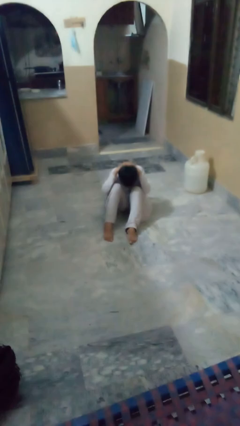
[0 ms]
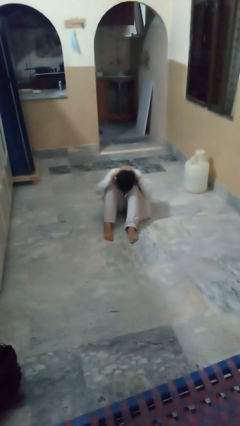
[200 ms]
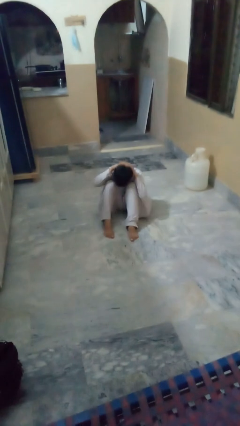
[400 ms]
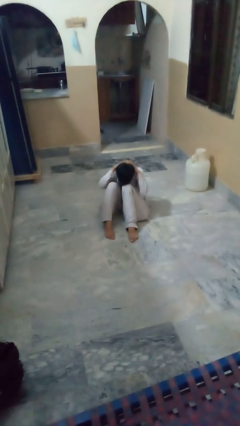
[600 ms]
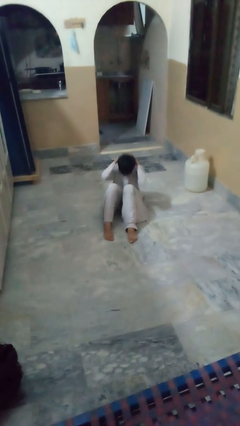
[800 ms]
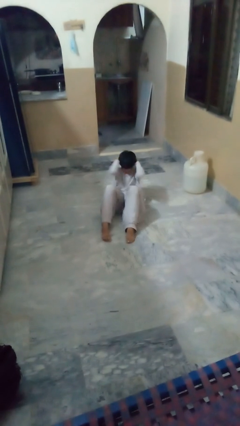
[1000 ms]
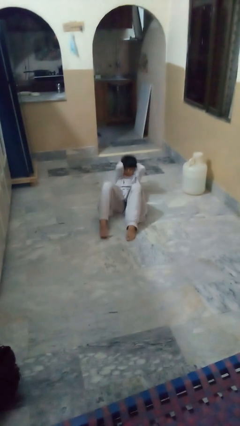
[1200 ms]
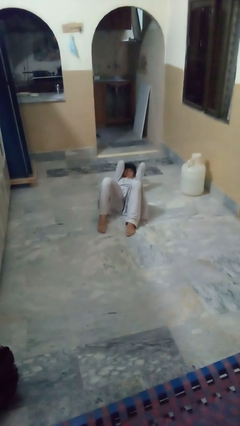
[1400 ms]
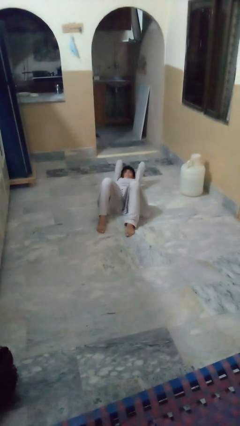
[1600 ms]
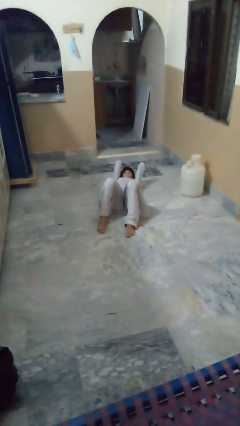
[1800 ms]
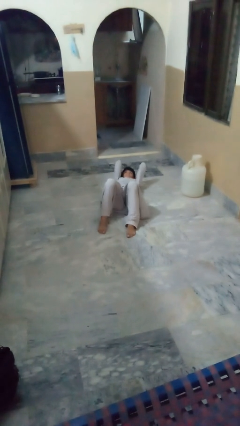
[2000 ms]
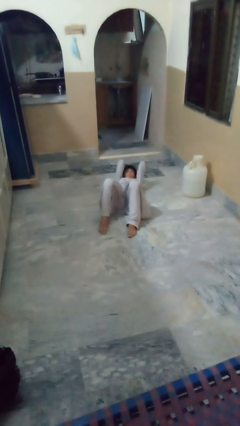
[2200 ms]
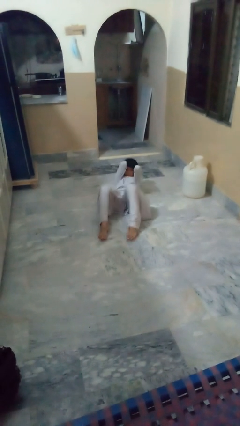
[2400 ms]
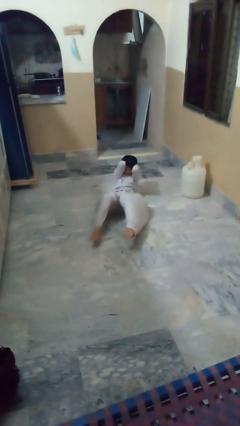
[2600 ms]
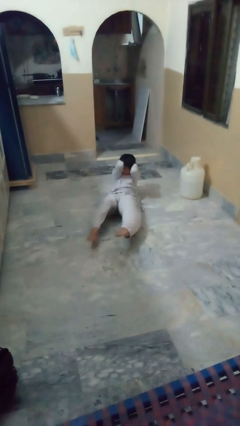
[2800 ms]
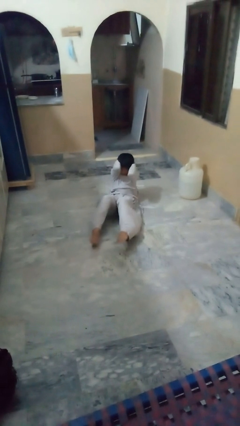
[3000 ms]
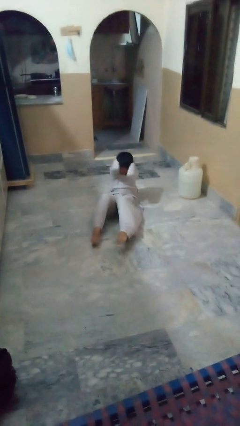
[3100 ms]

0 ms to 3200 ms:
person exercises with situp

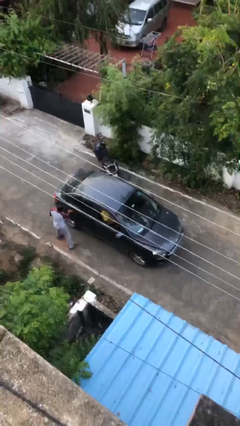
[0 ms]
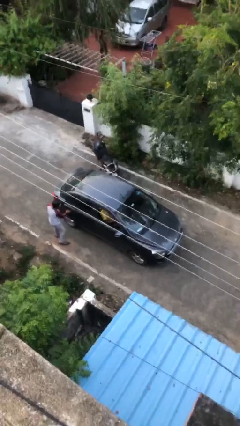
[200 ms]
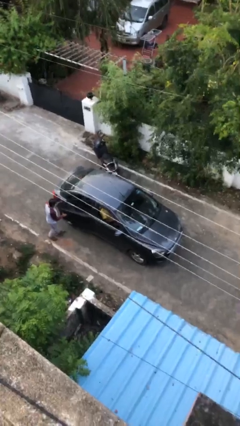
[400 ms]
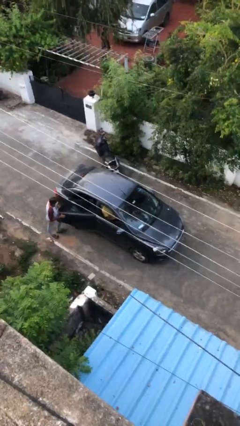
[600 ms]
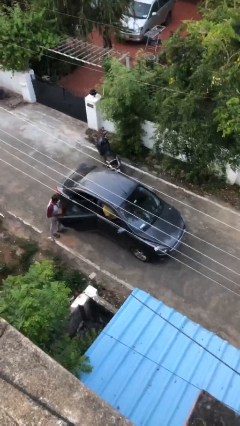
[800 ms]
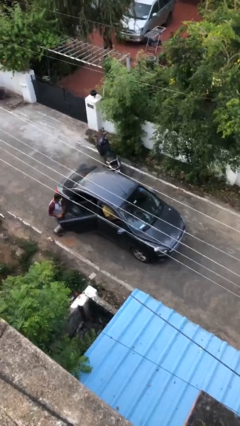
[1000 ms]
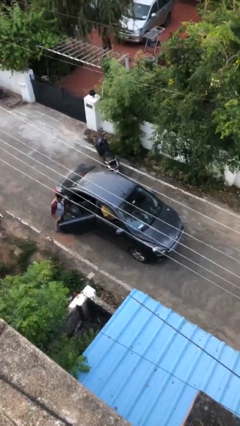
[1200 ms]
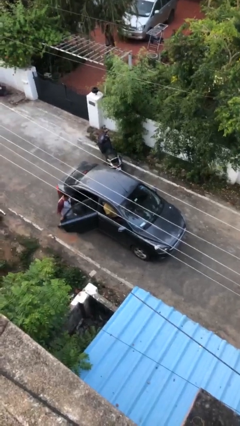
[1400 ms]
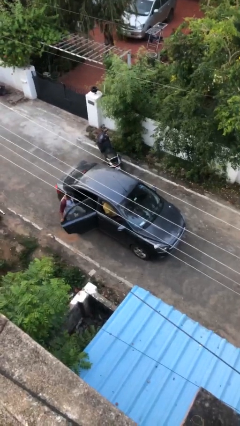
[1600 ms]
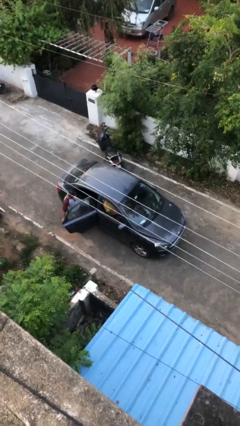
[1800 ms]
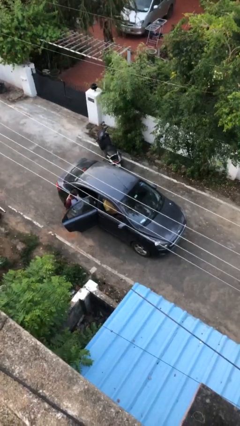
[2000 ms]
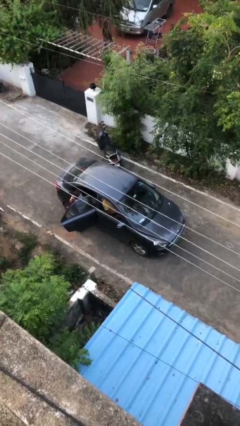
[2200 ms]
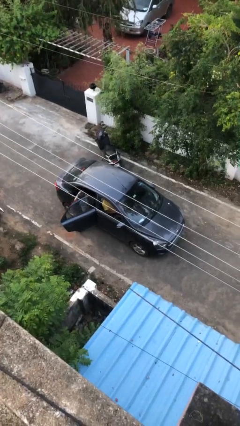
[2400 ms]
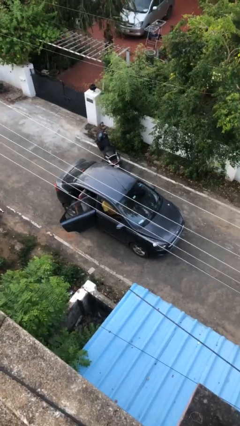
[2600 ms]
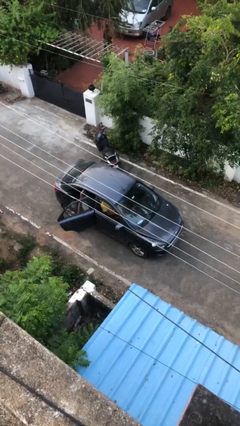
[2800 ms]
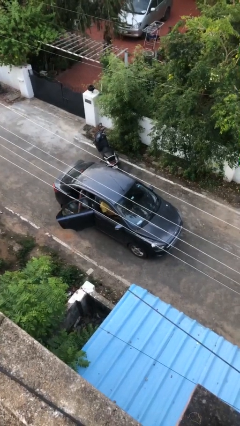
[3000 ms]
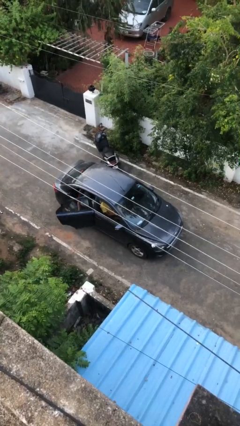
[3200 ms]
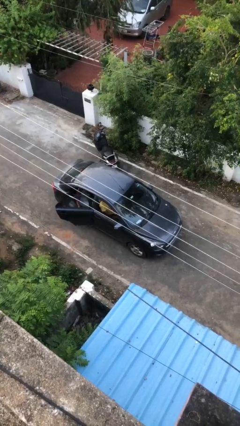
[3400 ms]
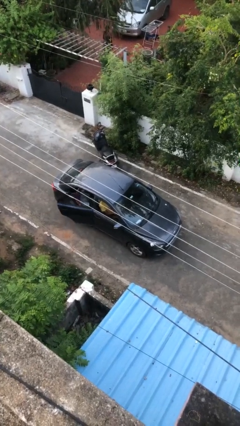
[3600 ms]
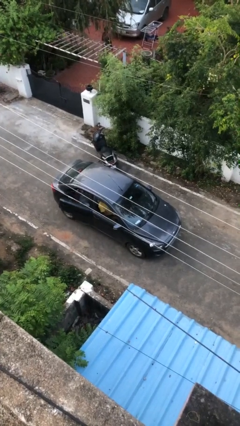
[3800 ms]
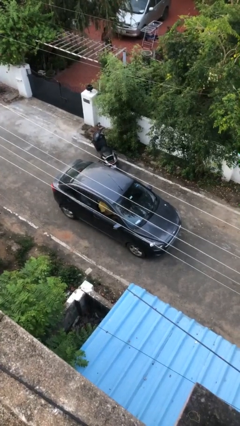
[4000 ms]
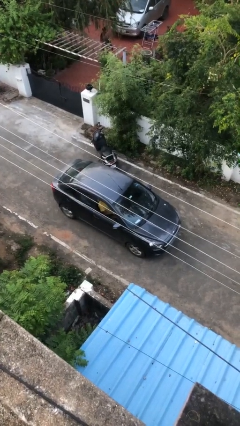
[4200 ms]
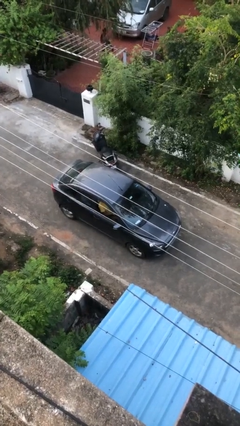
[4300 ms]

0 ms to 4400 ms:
car picks up person

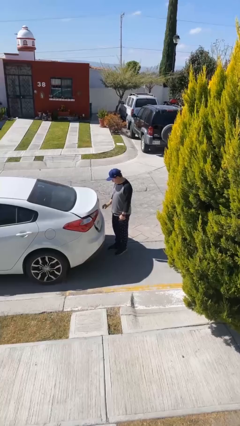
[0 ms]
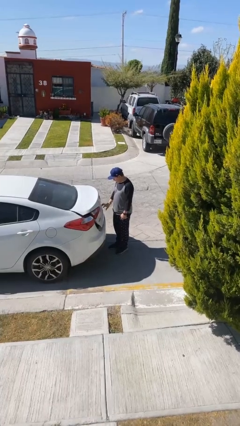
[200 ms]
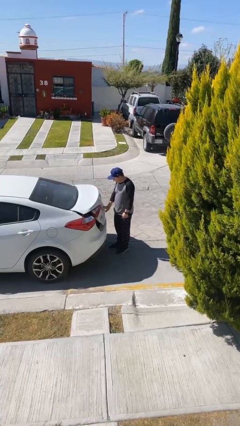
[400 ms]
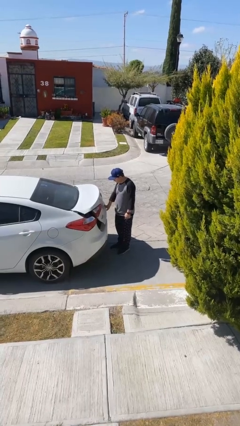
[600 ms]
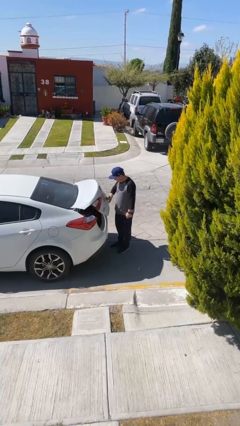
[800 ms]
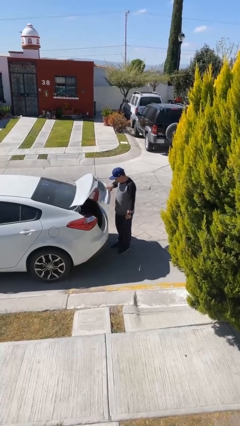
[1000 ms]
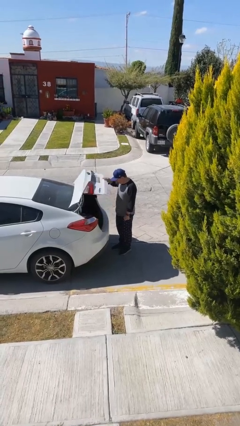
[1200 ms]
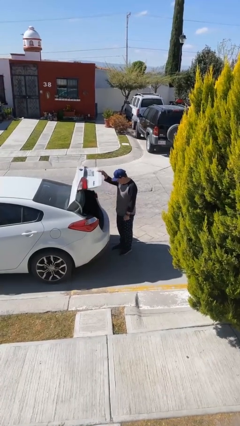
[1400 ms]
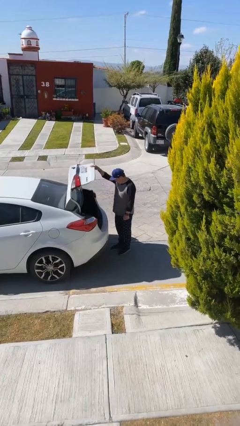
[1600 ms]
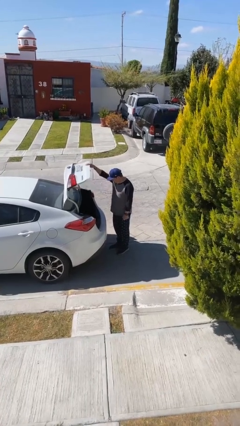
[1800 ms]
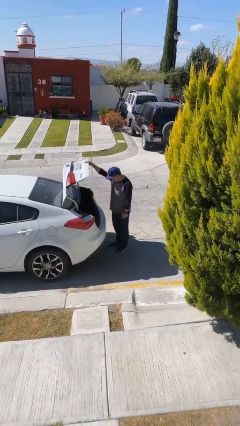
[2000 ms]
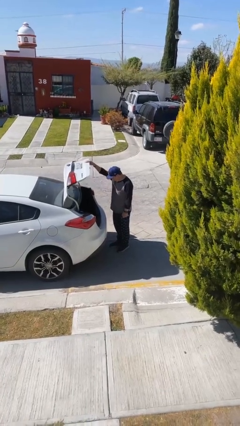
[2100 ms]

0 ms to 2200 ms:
person opens car trunk

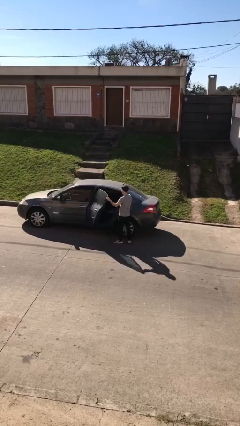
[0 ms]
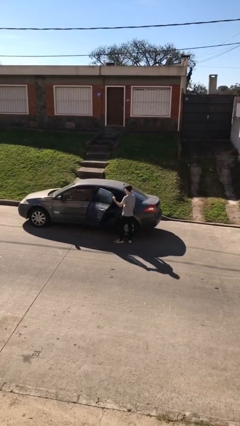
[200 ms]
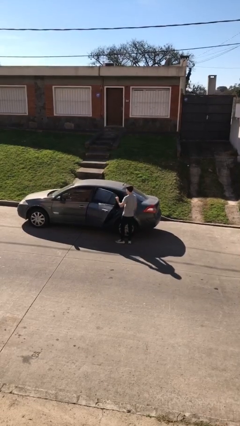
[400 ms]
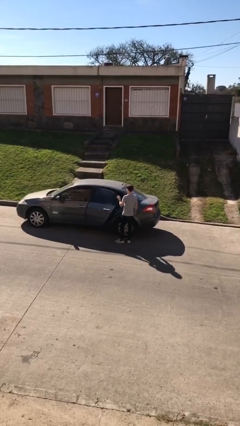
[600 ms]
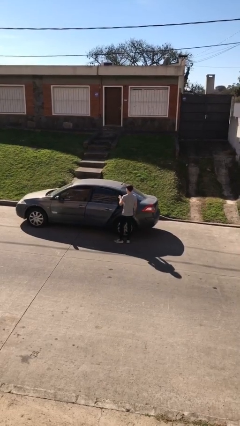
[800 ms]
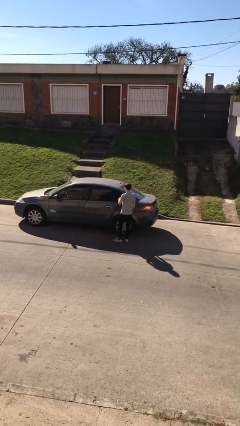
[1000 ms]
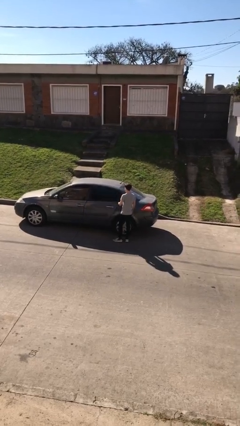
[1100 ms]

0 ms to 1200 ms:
person closes car door

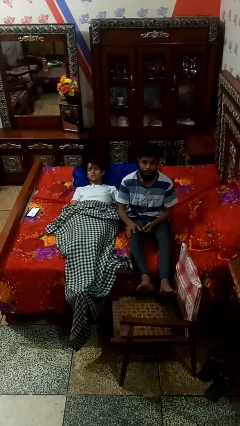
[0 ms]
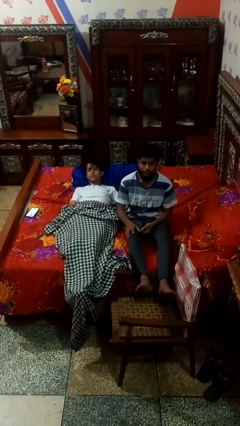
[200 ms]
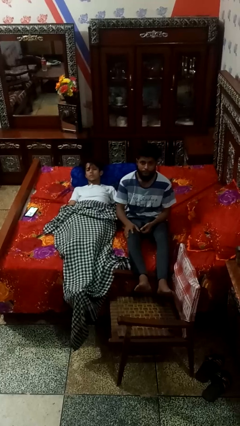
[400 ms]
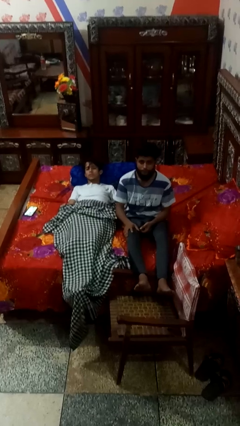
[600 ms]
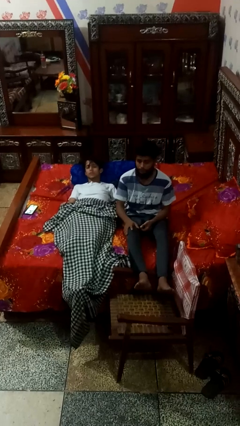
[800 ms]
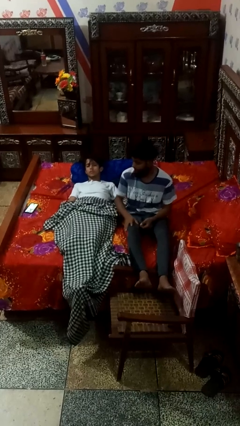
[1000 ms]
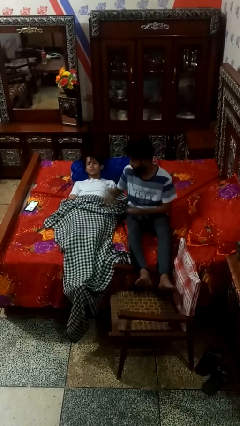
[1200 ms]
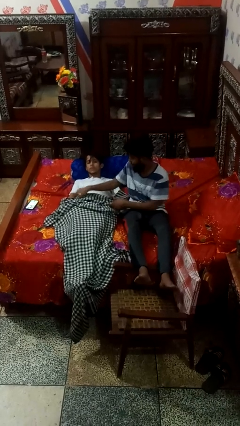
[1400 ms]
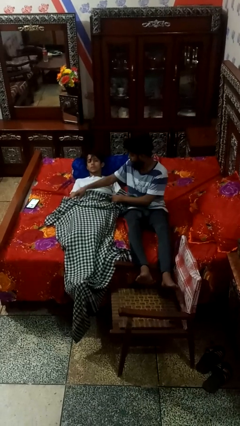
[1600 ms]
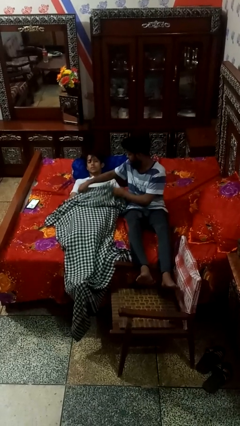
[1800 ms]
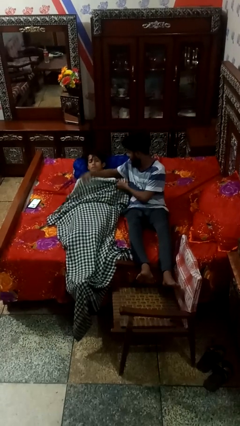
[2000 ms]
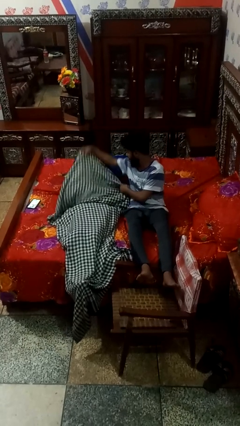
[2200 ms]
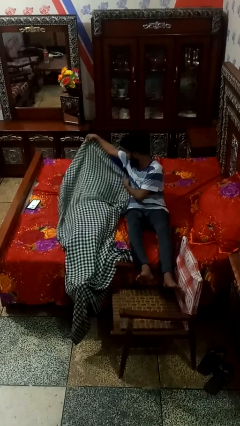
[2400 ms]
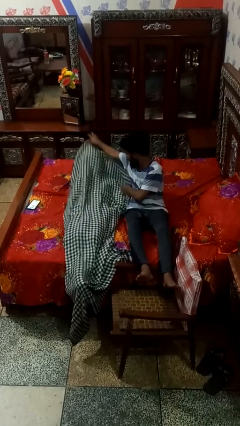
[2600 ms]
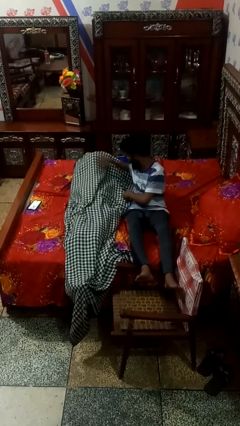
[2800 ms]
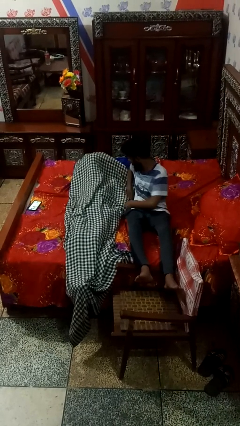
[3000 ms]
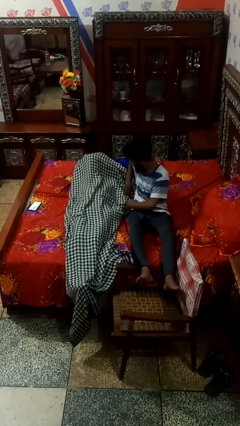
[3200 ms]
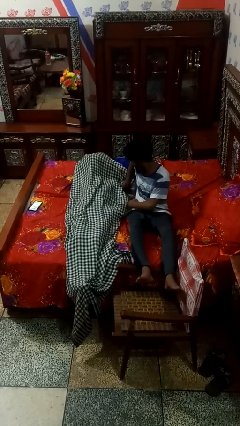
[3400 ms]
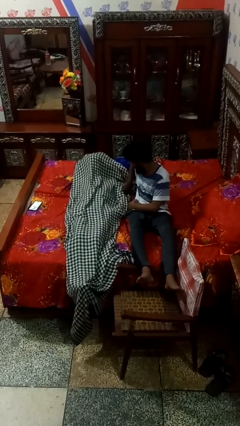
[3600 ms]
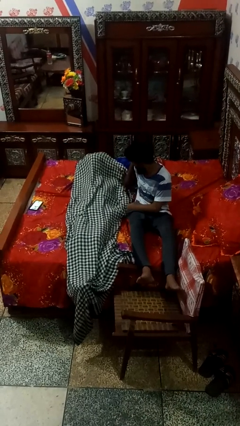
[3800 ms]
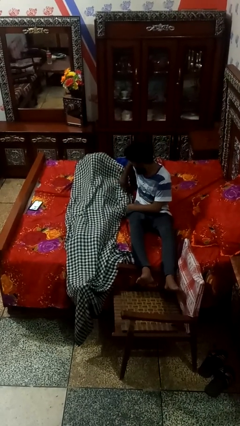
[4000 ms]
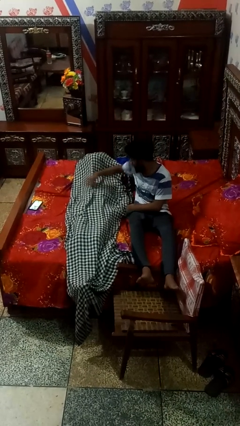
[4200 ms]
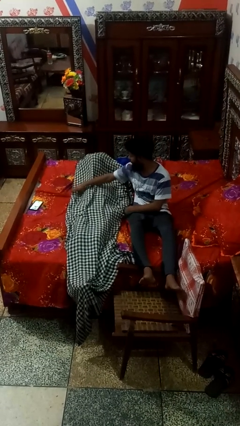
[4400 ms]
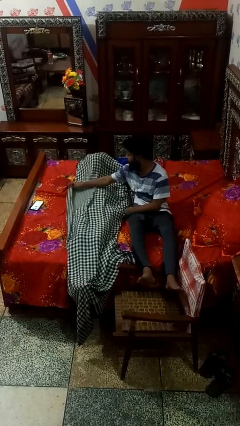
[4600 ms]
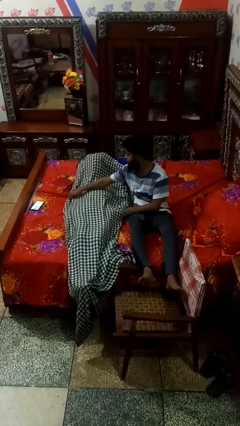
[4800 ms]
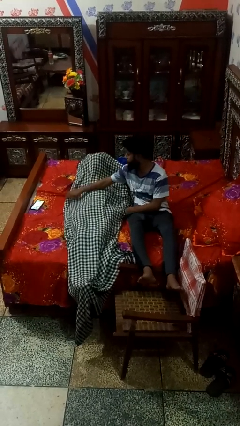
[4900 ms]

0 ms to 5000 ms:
person covers friend with blanket

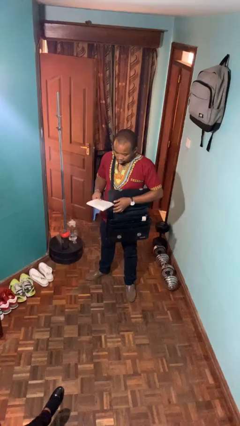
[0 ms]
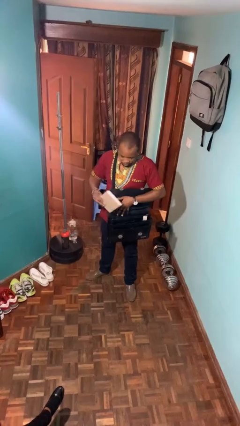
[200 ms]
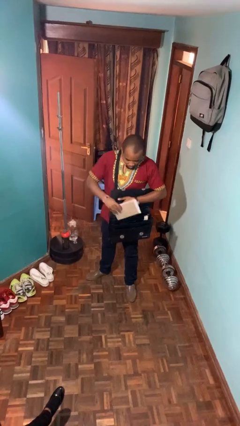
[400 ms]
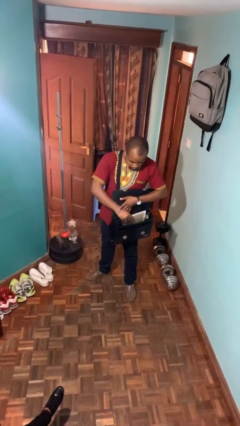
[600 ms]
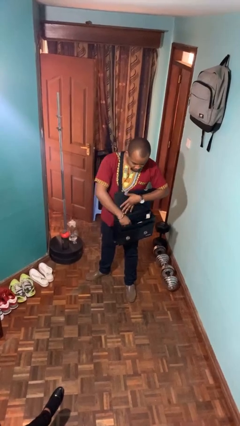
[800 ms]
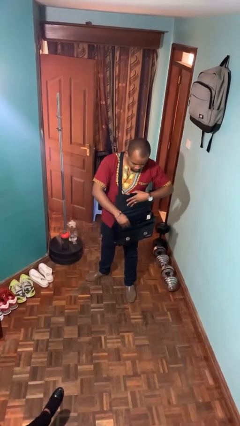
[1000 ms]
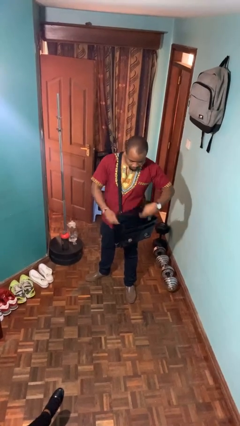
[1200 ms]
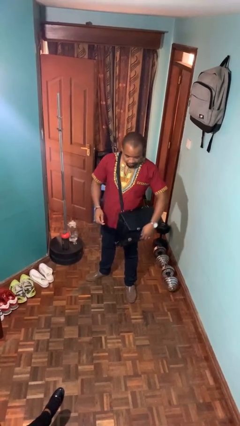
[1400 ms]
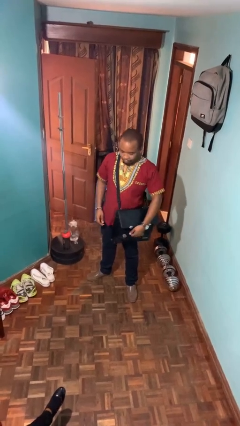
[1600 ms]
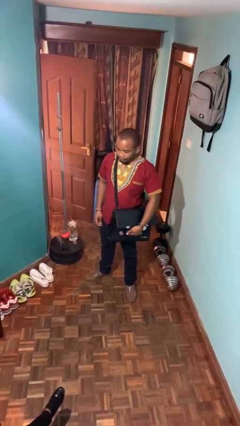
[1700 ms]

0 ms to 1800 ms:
person puts object into purse
